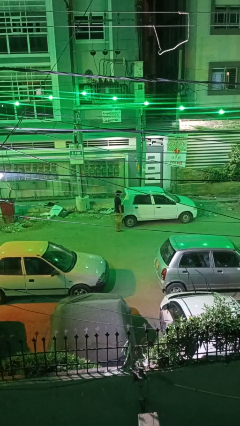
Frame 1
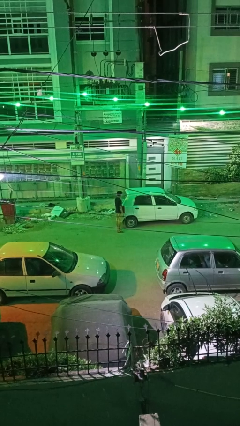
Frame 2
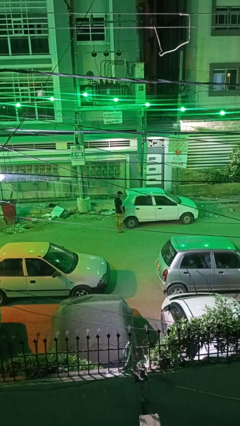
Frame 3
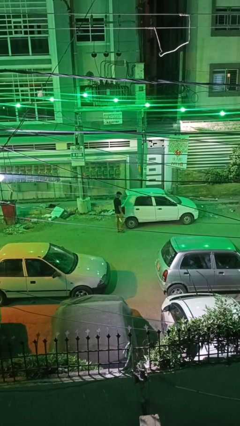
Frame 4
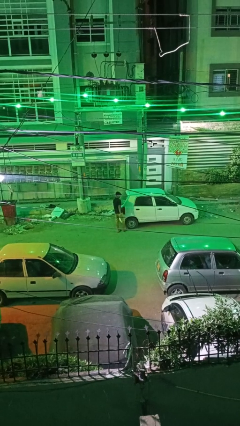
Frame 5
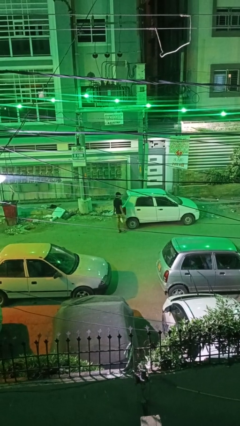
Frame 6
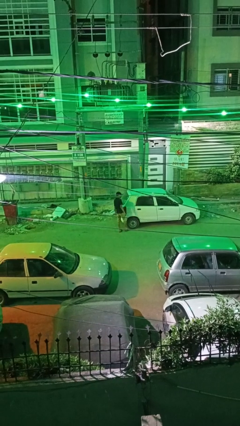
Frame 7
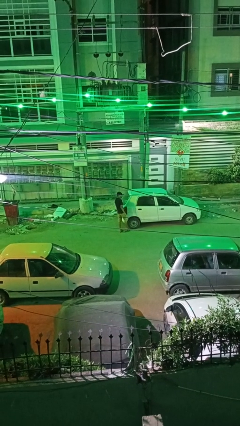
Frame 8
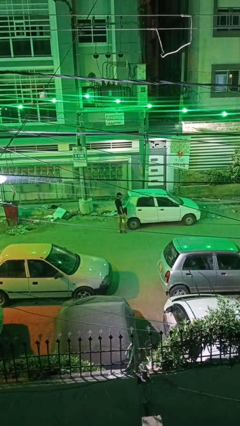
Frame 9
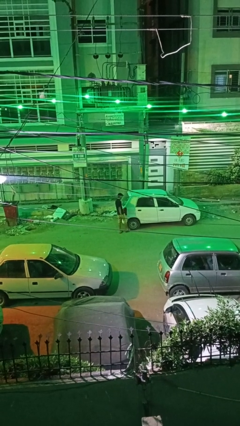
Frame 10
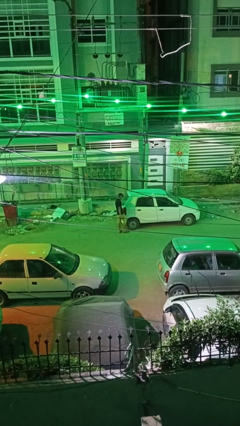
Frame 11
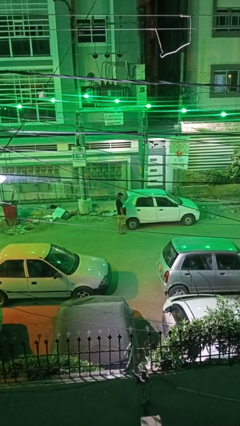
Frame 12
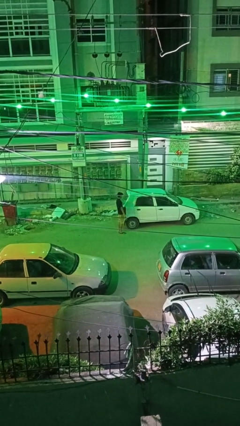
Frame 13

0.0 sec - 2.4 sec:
person kicks car tires

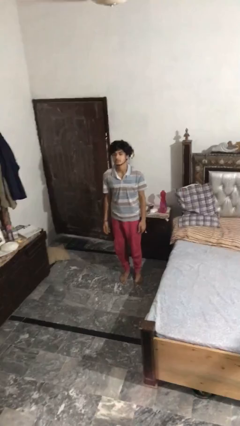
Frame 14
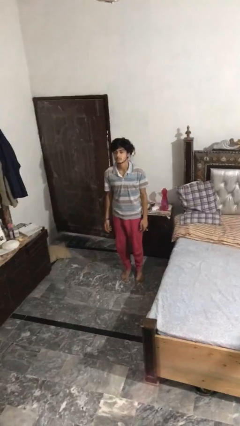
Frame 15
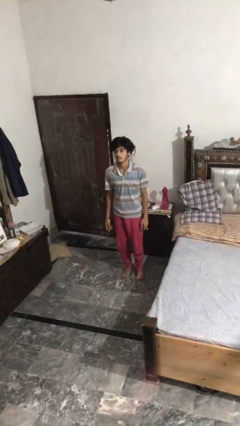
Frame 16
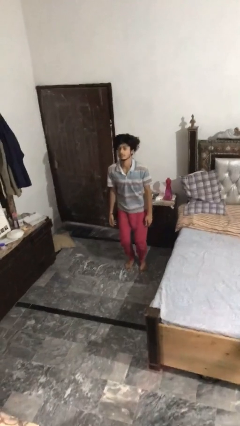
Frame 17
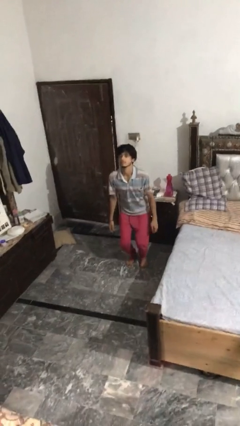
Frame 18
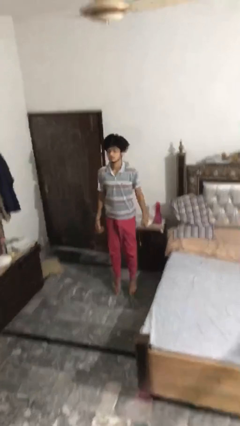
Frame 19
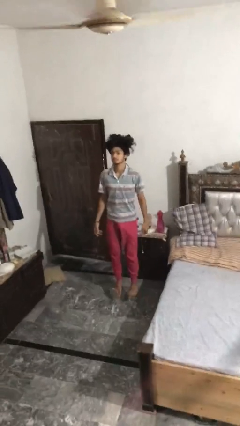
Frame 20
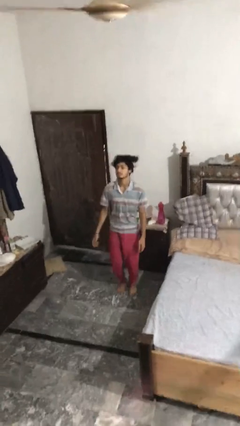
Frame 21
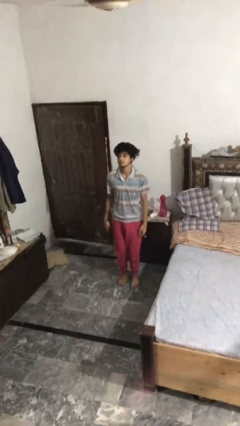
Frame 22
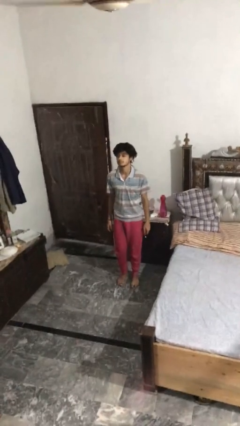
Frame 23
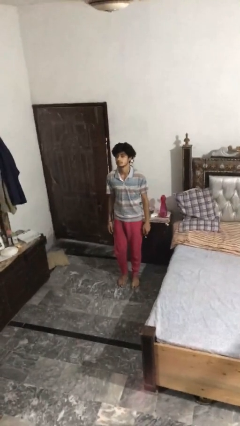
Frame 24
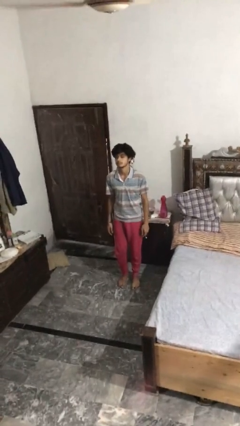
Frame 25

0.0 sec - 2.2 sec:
person jumps

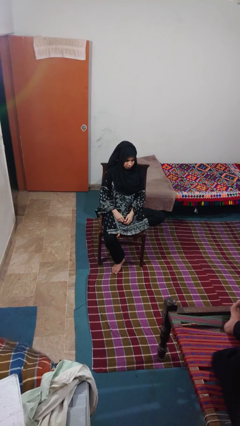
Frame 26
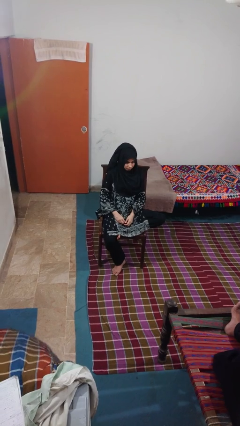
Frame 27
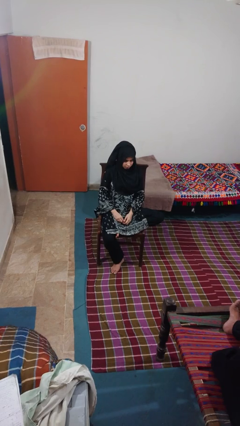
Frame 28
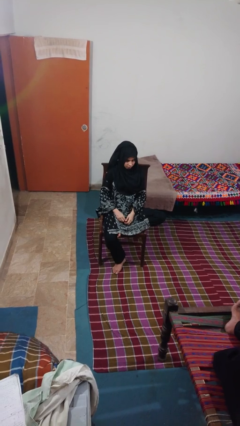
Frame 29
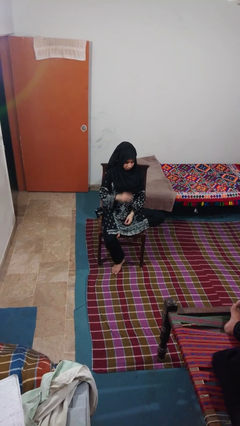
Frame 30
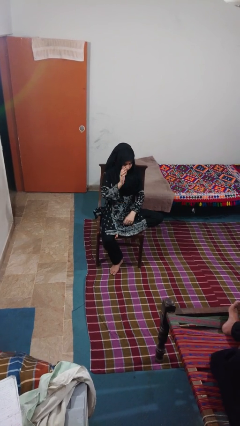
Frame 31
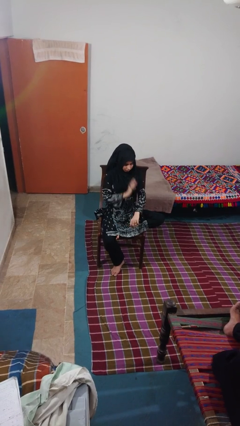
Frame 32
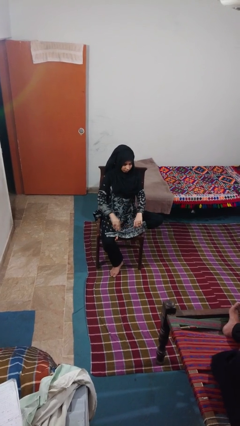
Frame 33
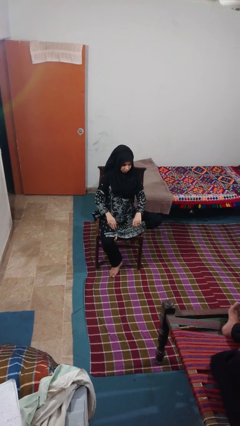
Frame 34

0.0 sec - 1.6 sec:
person swats bug

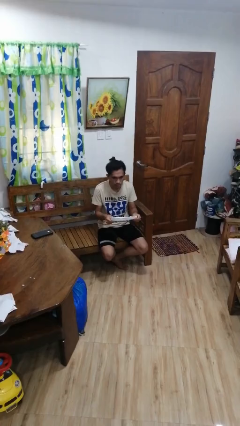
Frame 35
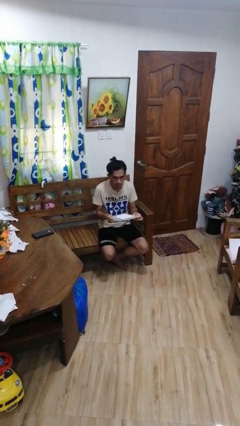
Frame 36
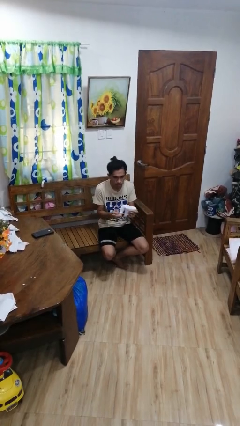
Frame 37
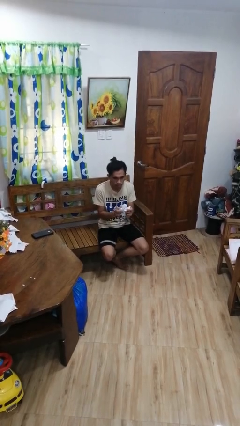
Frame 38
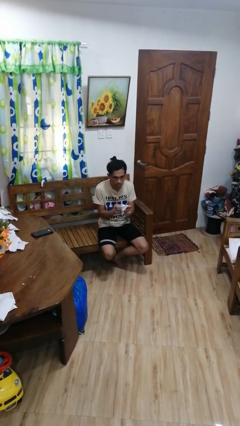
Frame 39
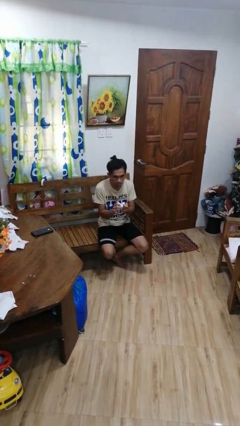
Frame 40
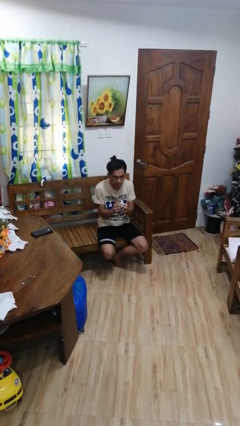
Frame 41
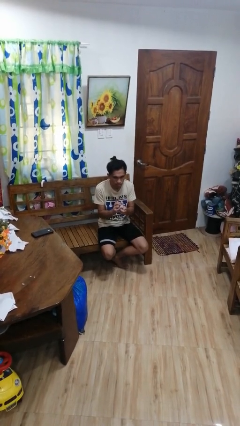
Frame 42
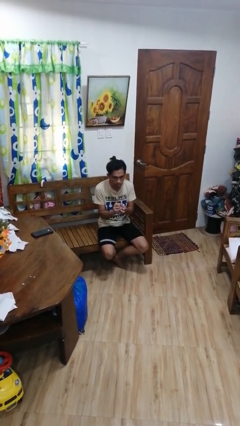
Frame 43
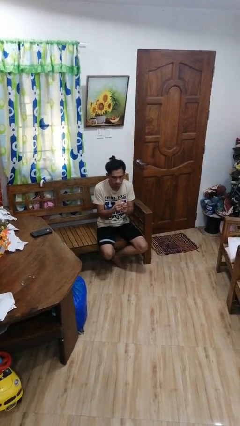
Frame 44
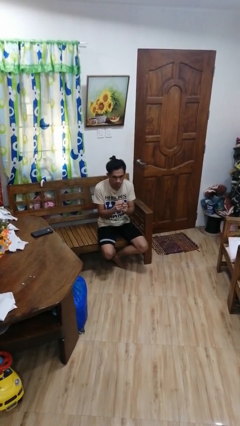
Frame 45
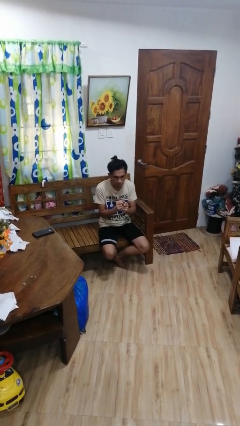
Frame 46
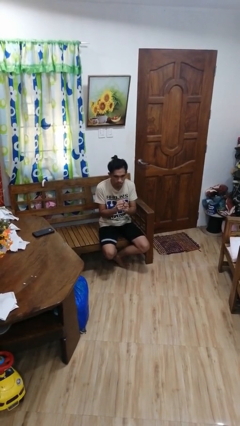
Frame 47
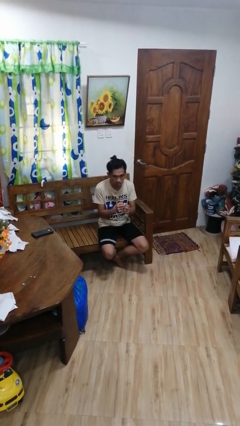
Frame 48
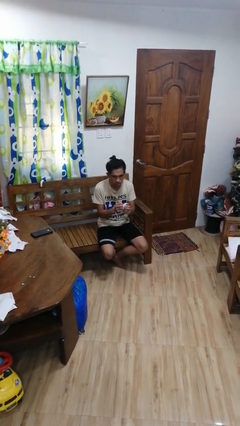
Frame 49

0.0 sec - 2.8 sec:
person crumples paper

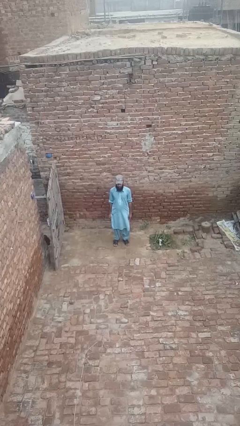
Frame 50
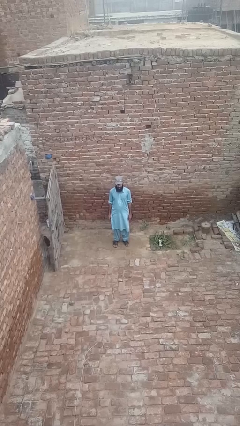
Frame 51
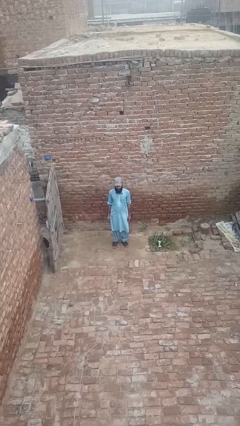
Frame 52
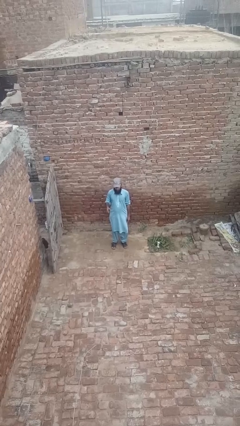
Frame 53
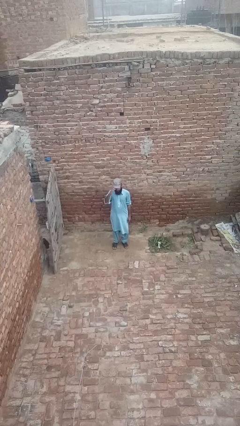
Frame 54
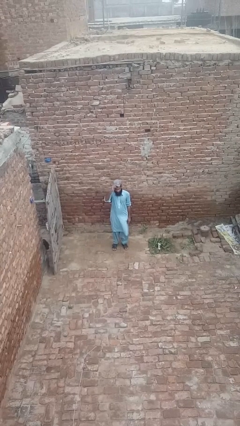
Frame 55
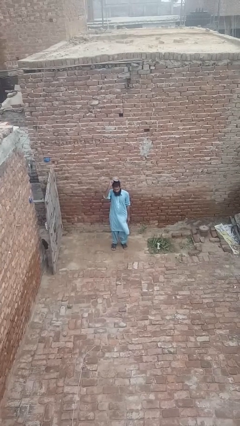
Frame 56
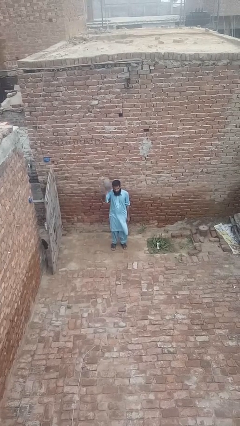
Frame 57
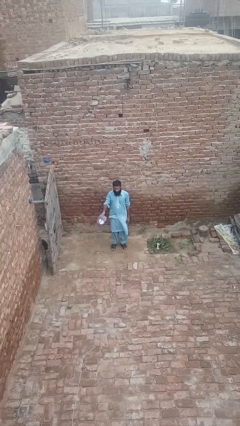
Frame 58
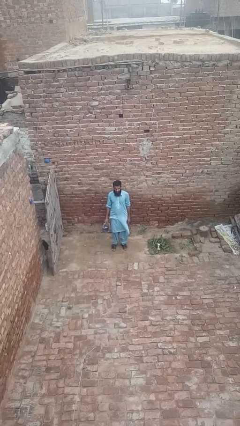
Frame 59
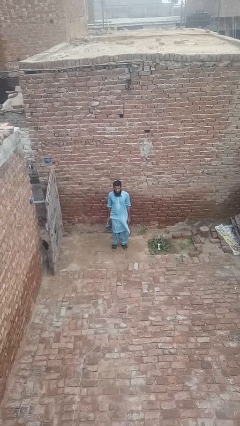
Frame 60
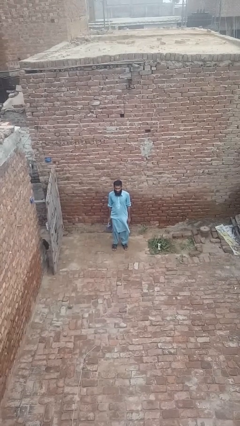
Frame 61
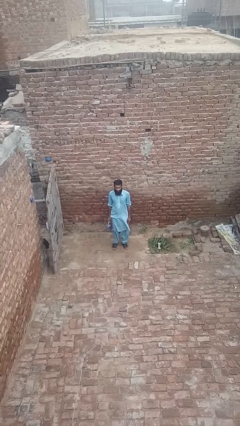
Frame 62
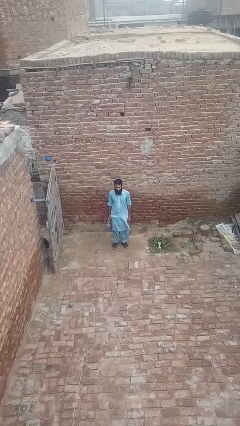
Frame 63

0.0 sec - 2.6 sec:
person takes off hat

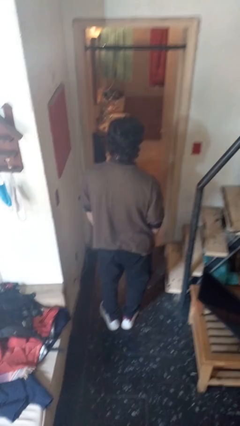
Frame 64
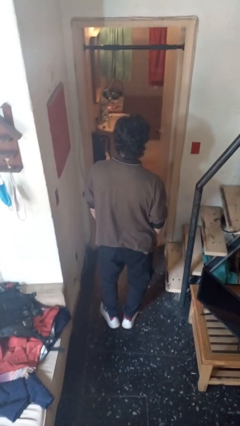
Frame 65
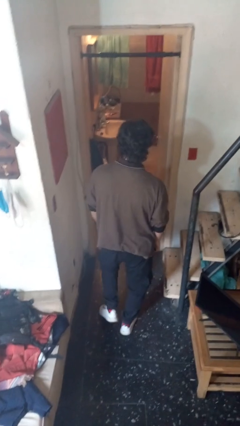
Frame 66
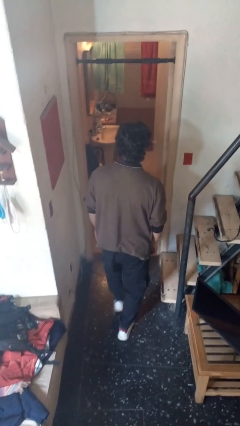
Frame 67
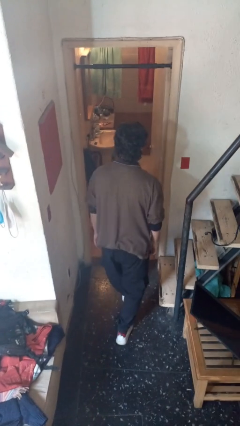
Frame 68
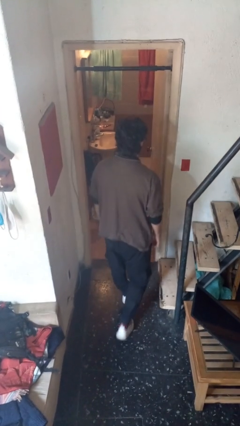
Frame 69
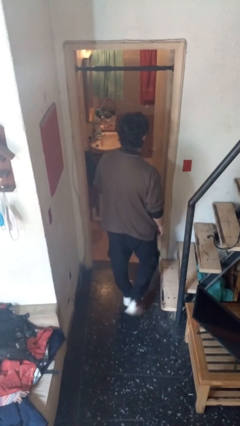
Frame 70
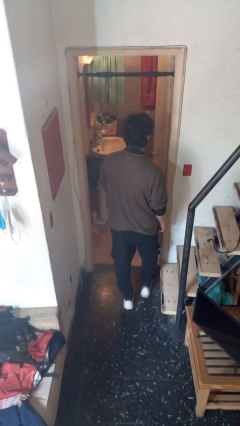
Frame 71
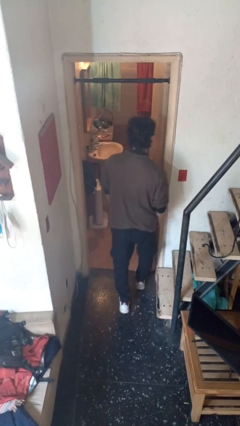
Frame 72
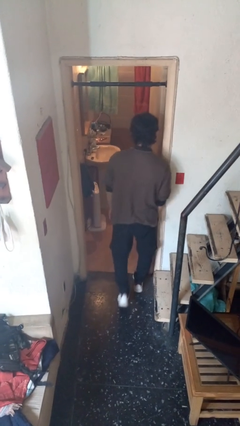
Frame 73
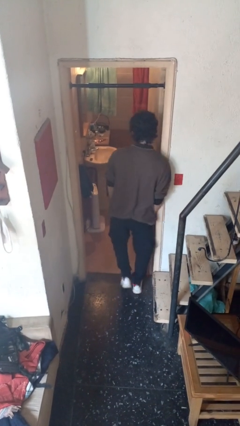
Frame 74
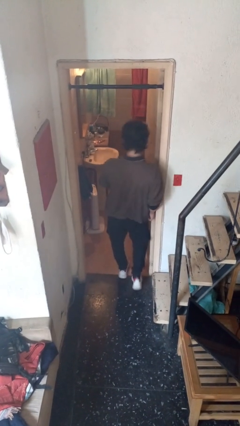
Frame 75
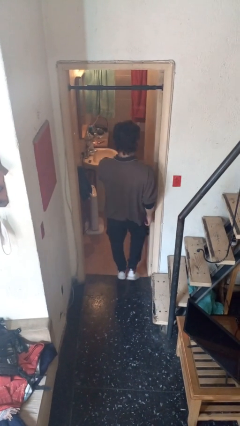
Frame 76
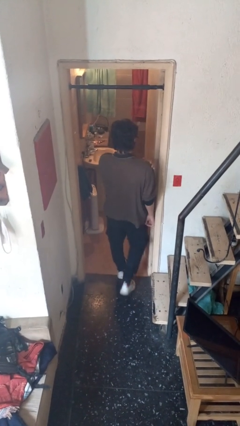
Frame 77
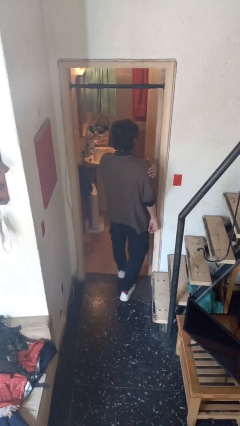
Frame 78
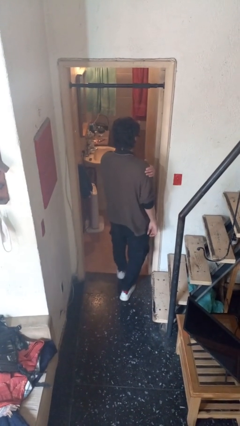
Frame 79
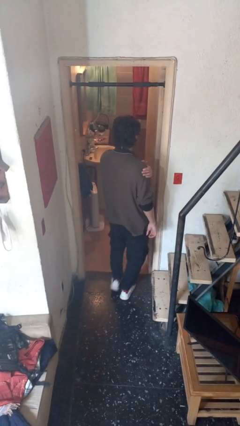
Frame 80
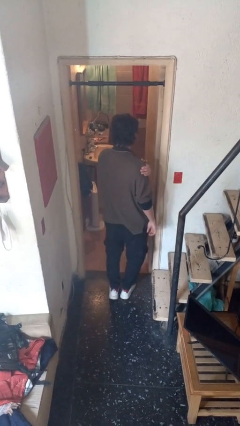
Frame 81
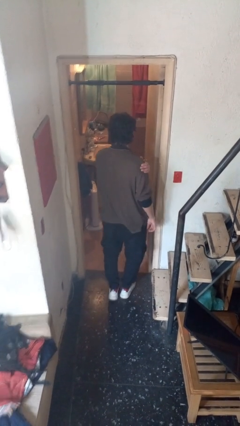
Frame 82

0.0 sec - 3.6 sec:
person bumps into wall

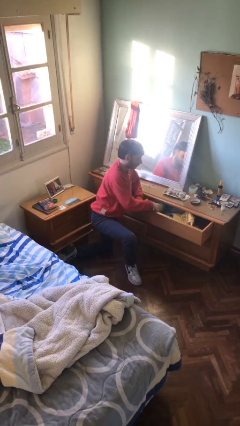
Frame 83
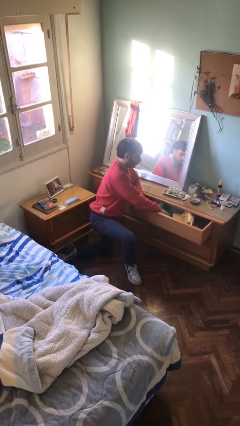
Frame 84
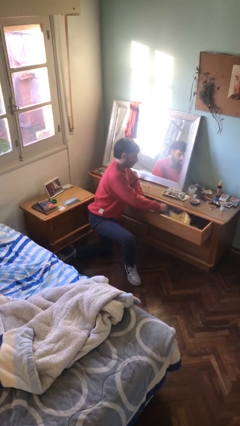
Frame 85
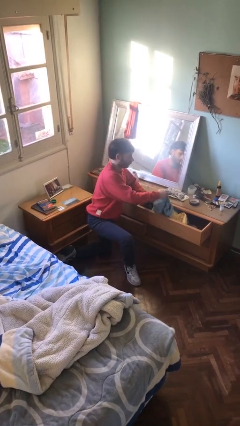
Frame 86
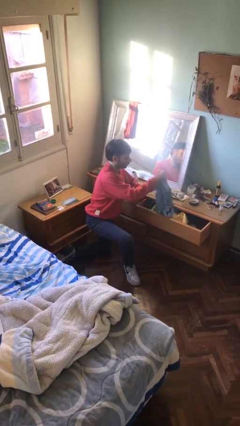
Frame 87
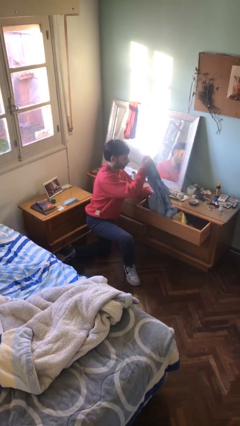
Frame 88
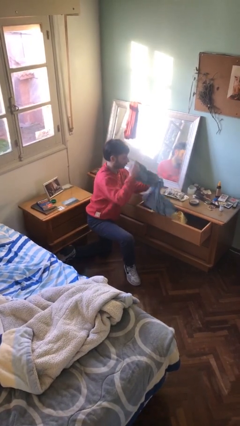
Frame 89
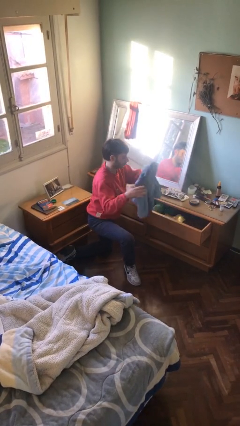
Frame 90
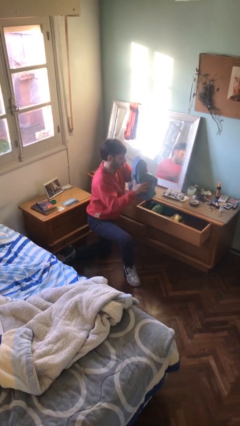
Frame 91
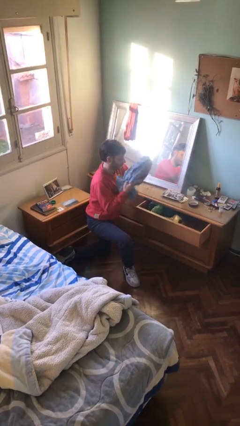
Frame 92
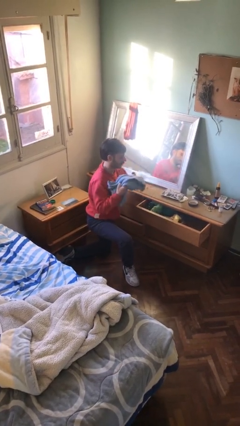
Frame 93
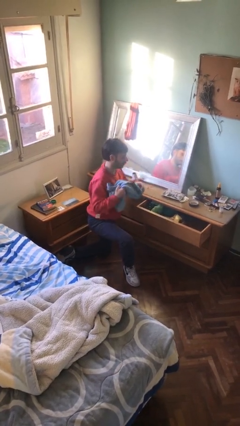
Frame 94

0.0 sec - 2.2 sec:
person takes clothes from dresser
